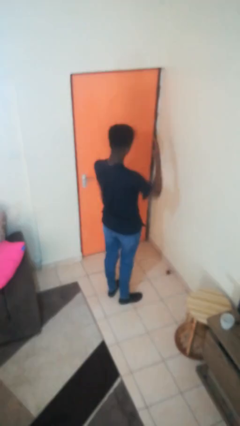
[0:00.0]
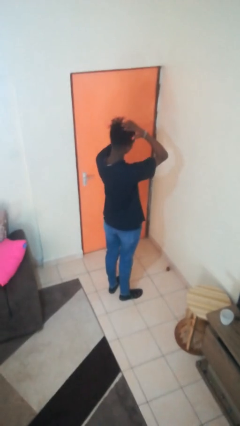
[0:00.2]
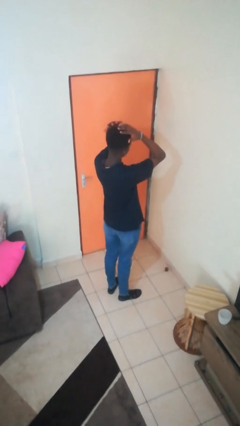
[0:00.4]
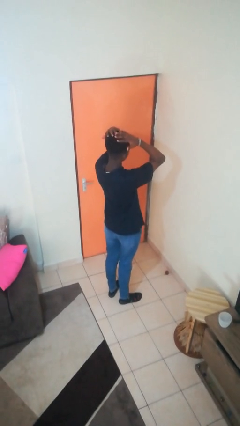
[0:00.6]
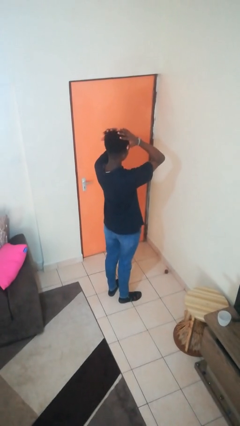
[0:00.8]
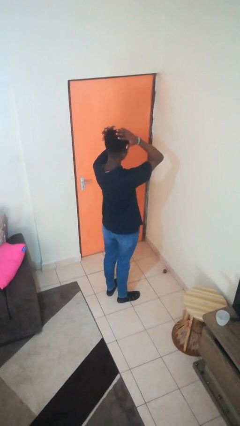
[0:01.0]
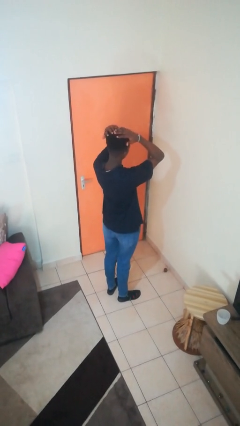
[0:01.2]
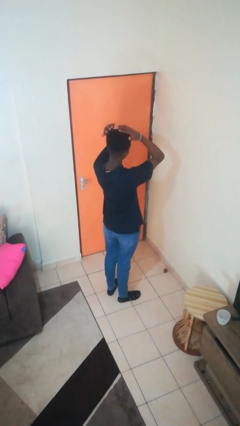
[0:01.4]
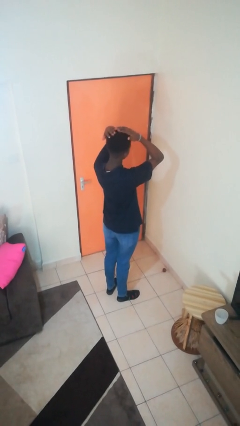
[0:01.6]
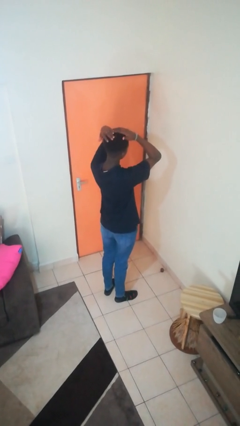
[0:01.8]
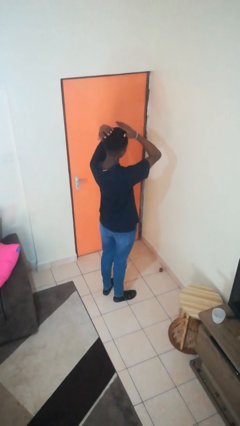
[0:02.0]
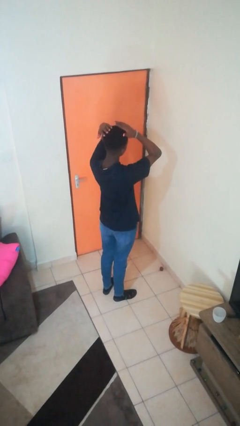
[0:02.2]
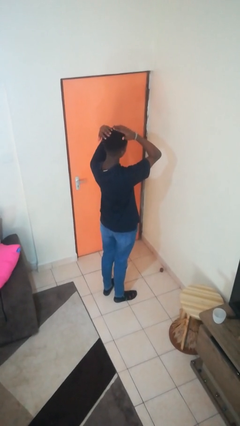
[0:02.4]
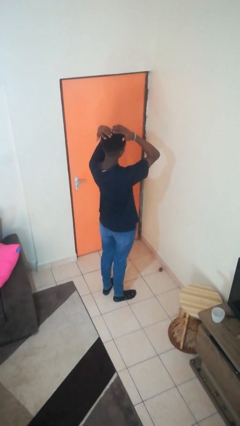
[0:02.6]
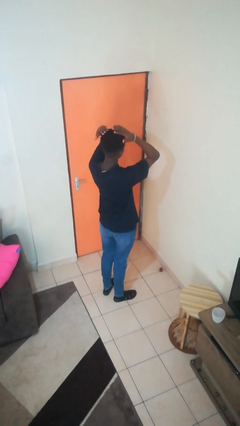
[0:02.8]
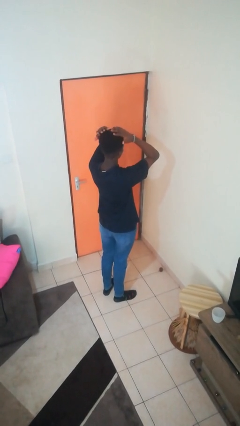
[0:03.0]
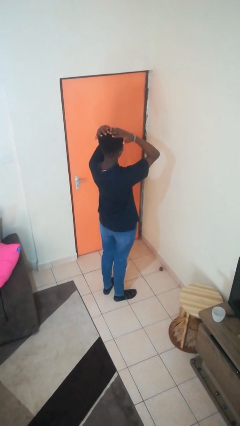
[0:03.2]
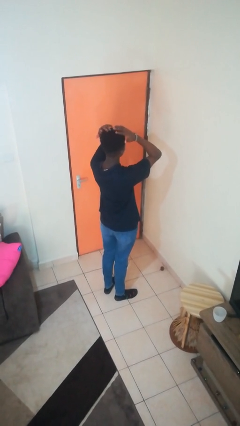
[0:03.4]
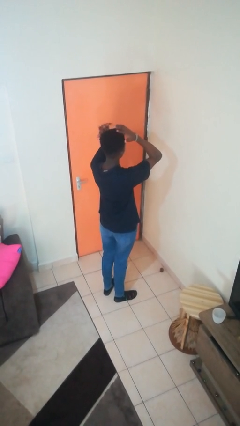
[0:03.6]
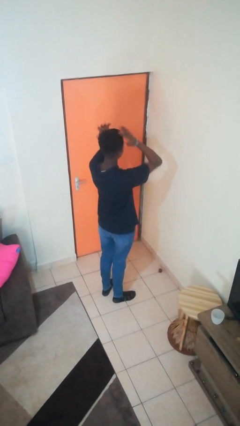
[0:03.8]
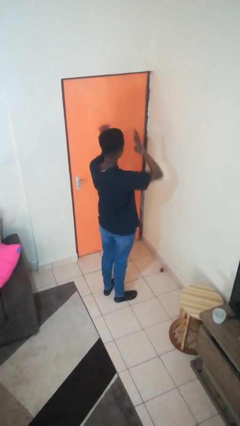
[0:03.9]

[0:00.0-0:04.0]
person pats head

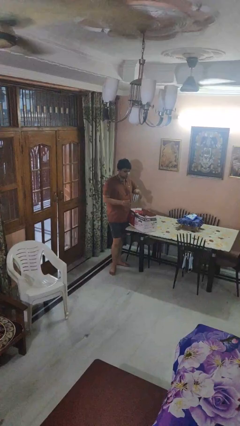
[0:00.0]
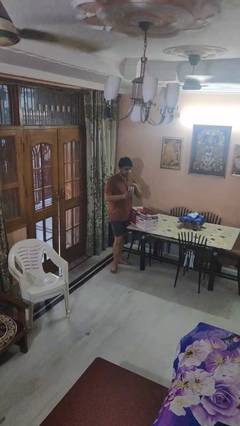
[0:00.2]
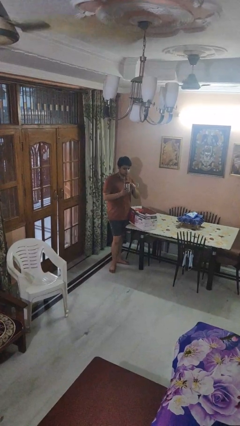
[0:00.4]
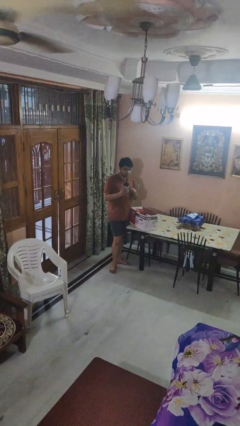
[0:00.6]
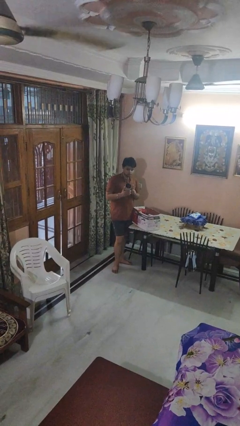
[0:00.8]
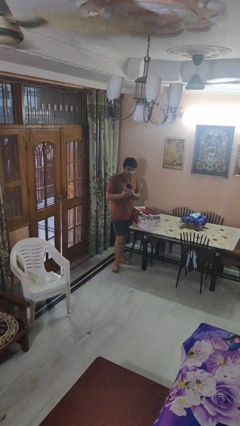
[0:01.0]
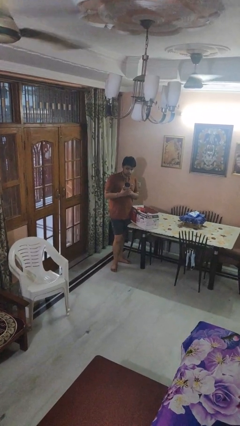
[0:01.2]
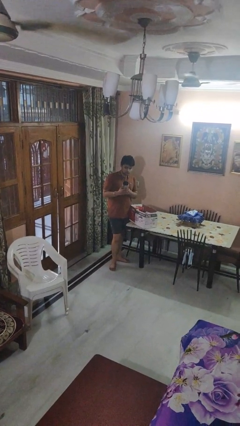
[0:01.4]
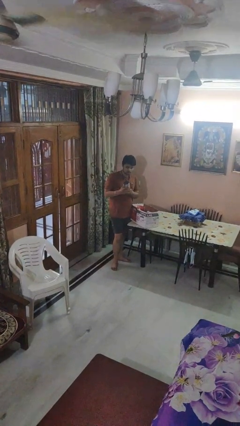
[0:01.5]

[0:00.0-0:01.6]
person takes object from box

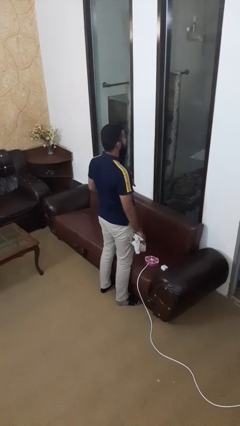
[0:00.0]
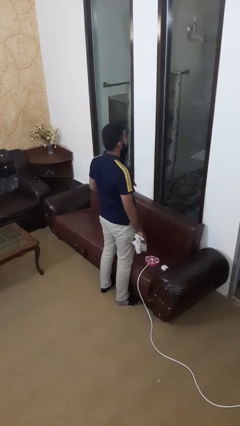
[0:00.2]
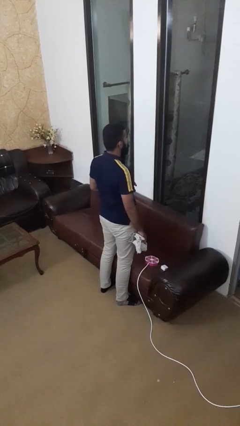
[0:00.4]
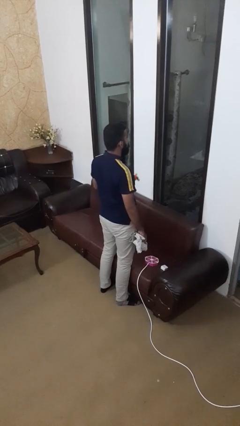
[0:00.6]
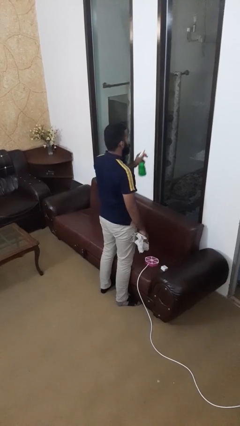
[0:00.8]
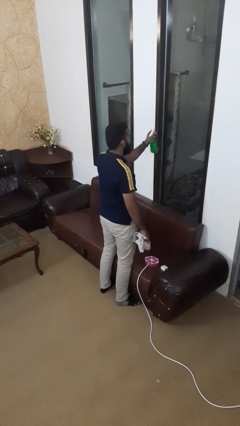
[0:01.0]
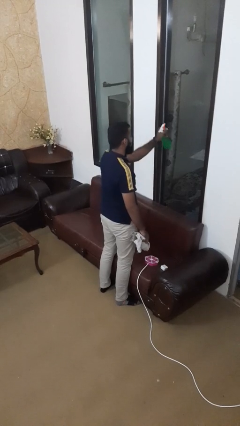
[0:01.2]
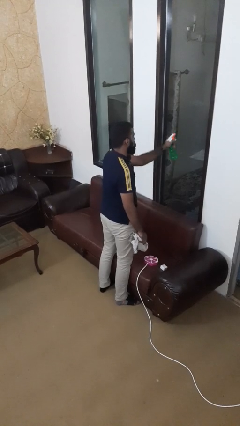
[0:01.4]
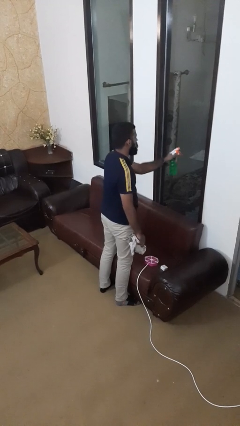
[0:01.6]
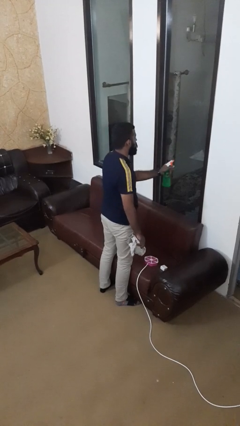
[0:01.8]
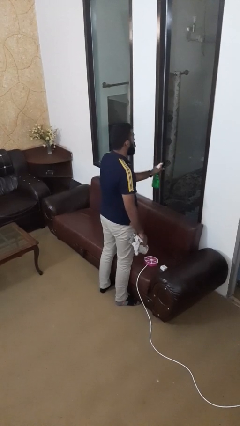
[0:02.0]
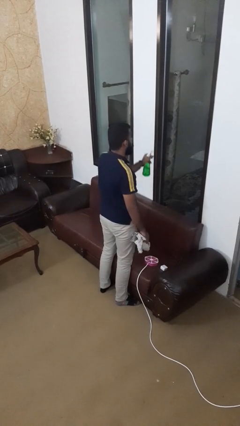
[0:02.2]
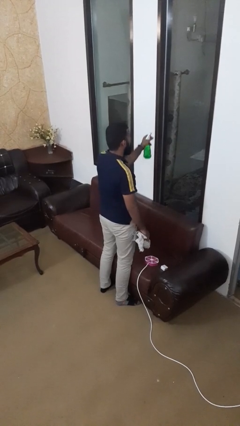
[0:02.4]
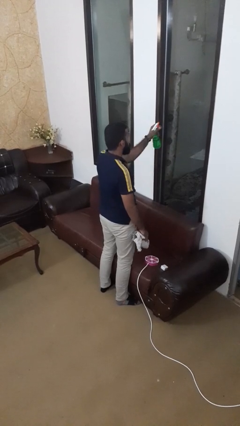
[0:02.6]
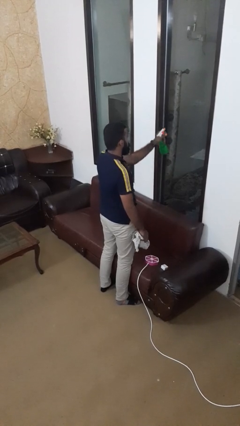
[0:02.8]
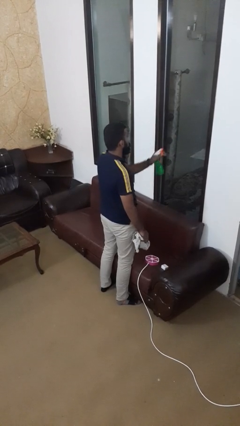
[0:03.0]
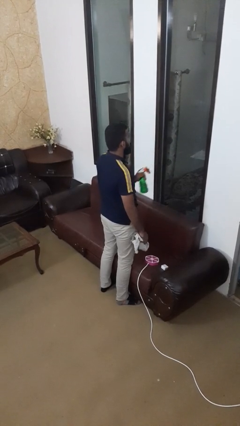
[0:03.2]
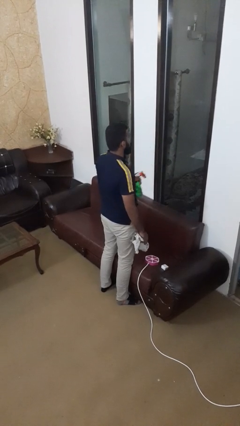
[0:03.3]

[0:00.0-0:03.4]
person sprays from bottle

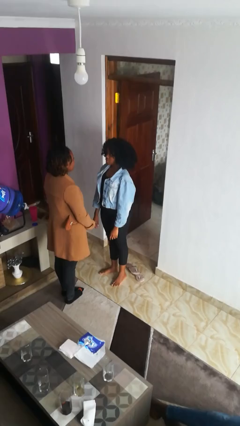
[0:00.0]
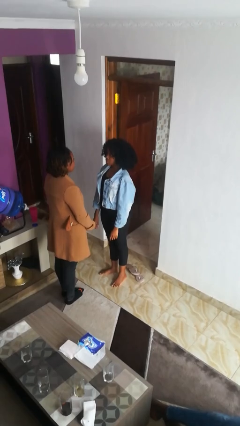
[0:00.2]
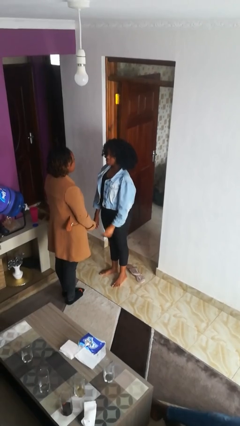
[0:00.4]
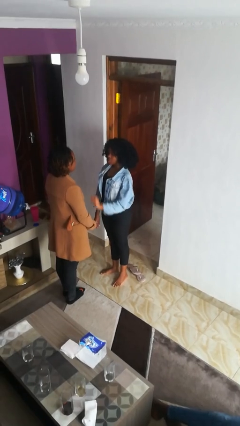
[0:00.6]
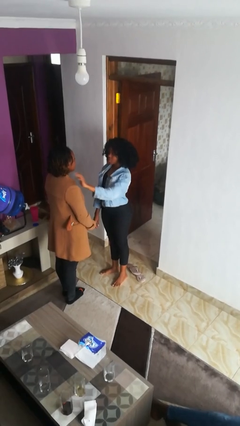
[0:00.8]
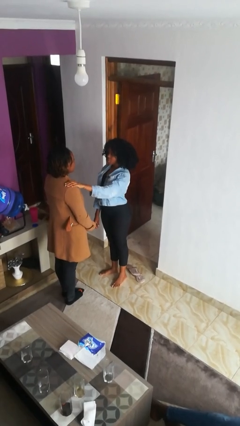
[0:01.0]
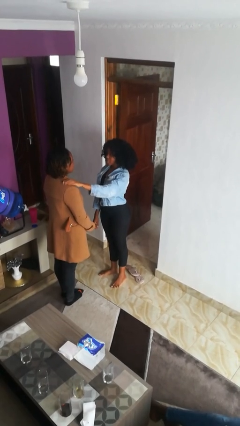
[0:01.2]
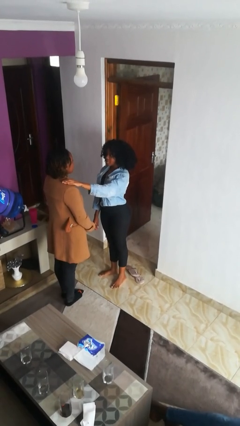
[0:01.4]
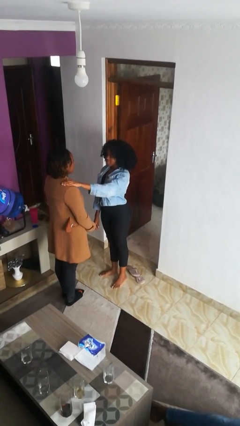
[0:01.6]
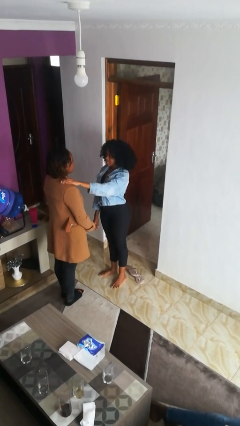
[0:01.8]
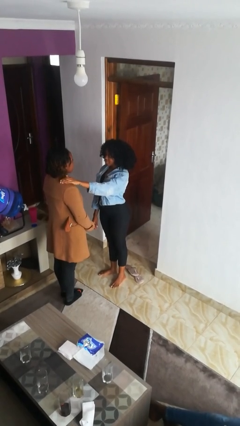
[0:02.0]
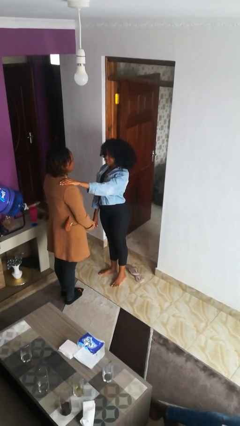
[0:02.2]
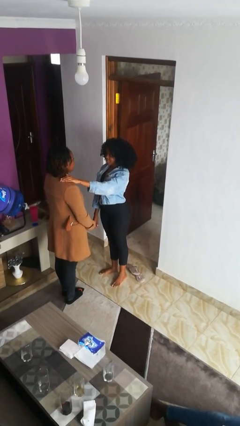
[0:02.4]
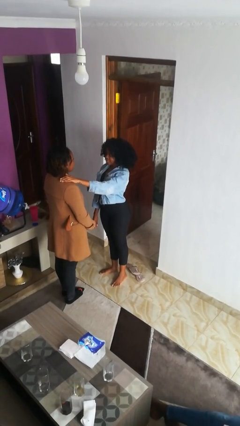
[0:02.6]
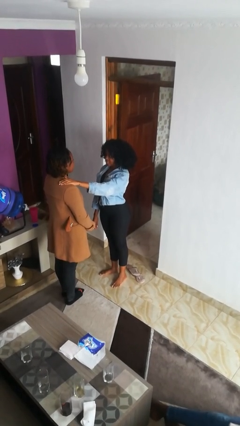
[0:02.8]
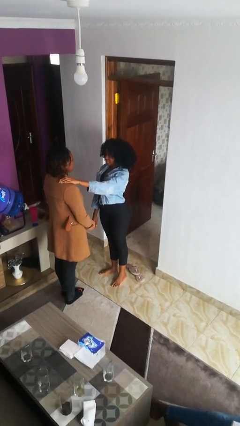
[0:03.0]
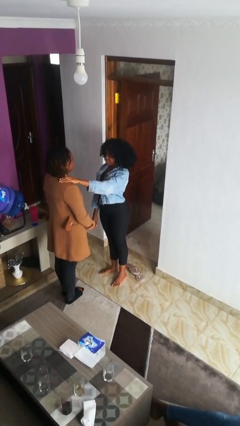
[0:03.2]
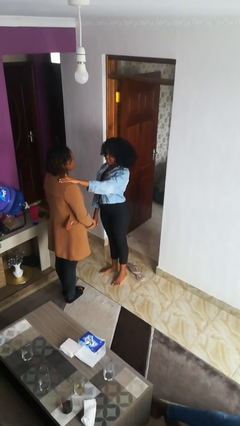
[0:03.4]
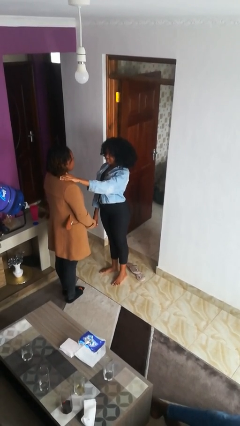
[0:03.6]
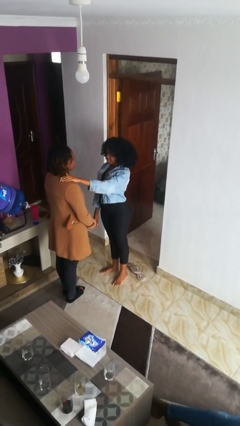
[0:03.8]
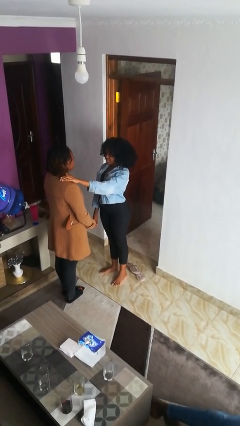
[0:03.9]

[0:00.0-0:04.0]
person pounds shoulders of person

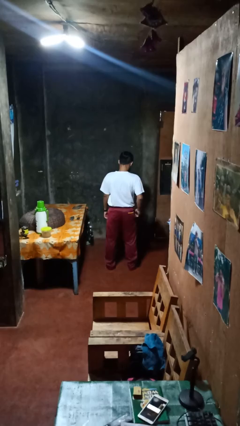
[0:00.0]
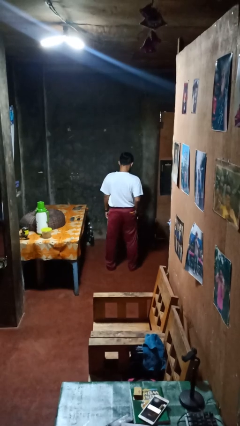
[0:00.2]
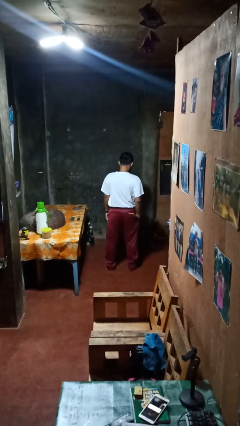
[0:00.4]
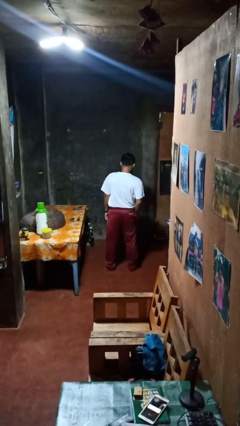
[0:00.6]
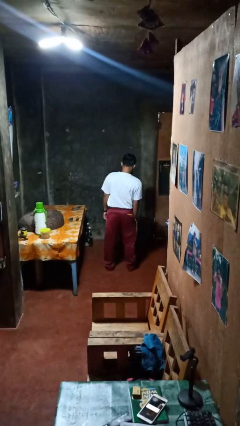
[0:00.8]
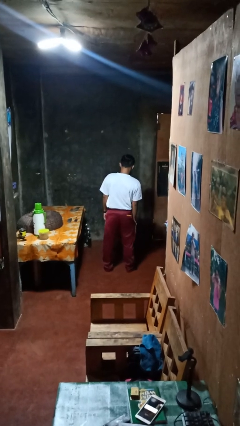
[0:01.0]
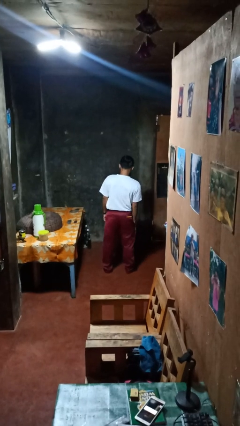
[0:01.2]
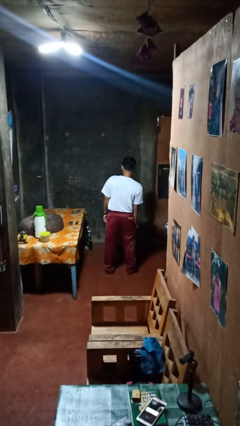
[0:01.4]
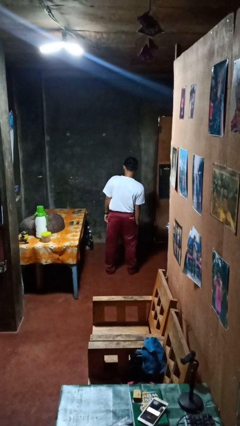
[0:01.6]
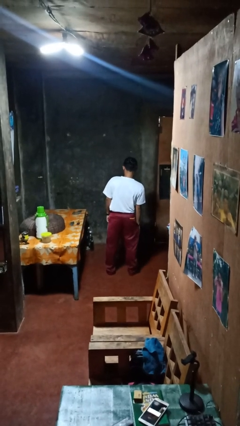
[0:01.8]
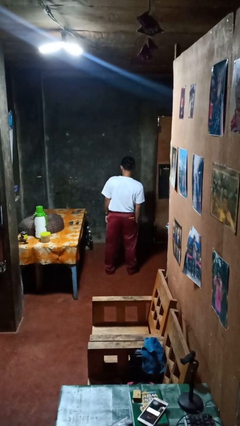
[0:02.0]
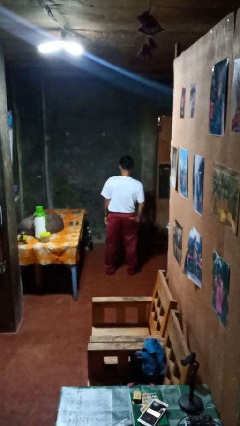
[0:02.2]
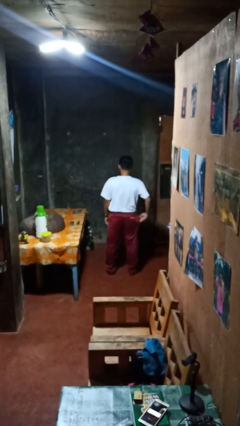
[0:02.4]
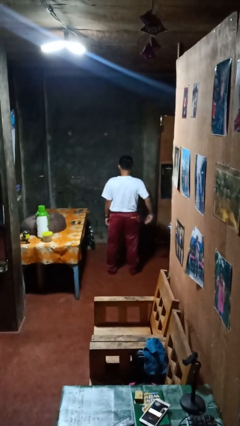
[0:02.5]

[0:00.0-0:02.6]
person puts hands in back pockets

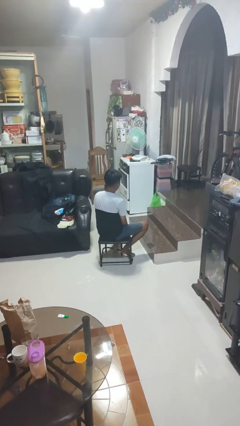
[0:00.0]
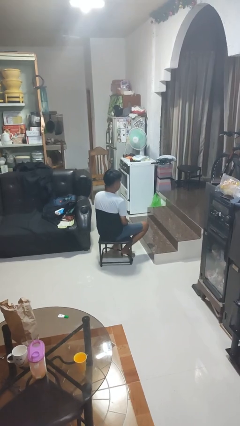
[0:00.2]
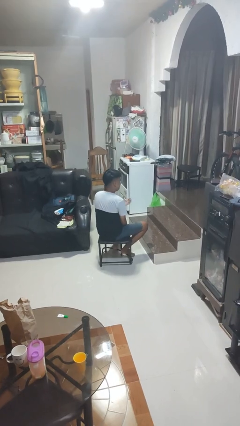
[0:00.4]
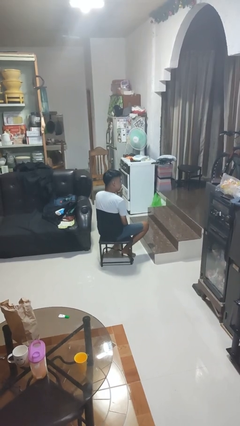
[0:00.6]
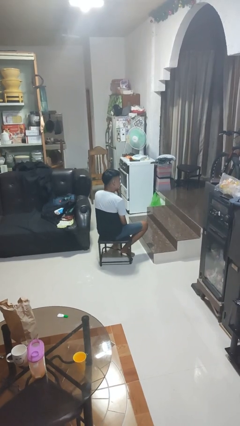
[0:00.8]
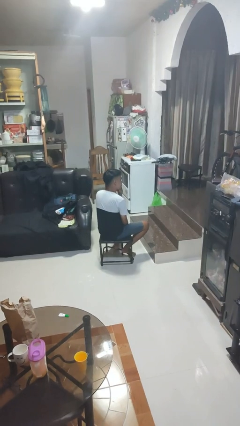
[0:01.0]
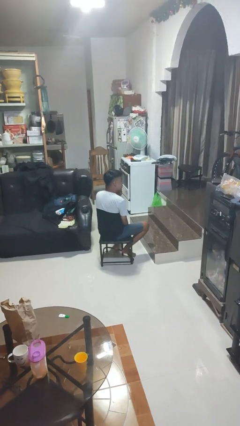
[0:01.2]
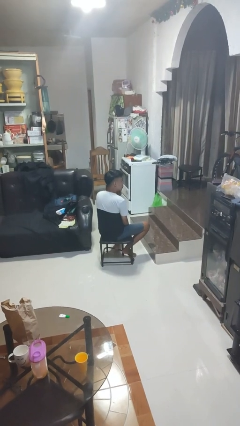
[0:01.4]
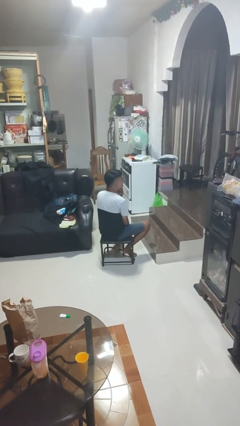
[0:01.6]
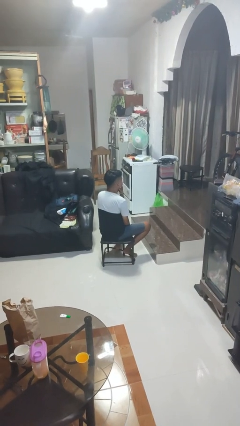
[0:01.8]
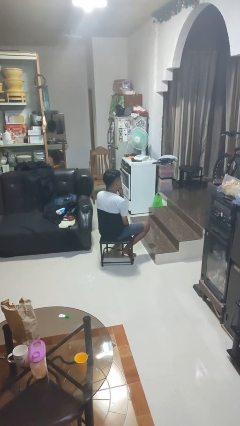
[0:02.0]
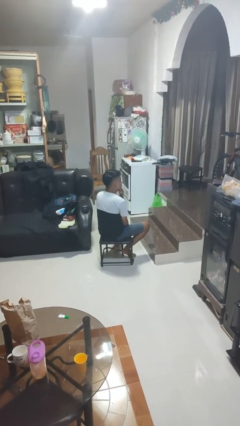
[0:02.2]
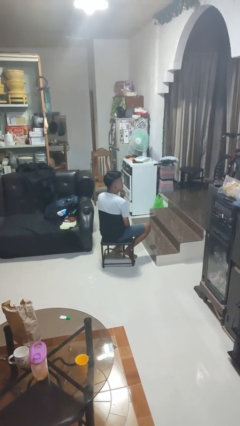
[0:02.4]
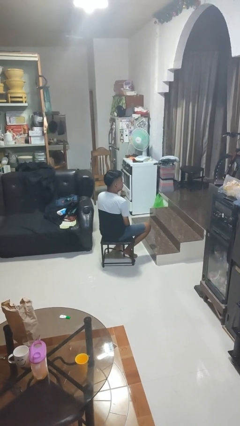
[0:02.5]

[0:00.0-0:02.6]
person strokes chin
